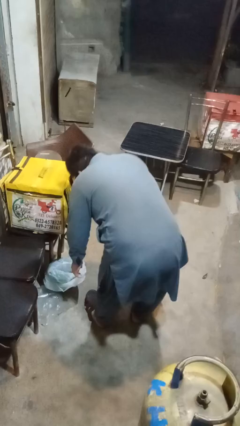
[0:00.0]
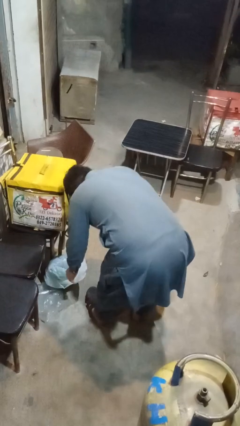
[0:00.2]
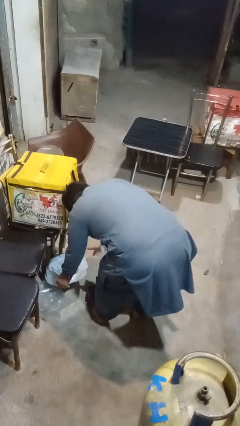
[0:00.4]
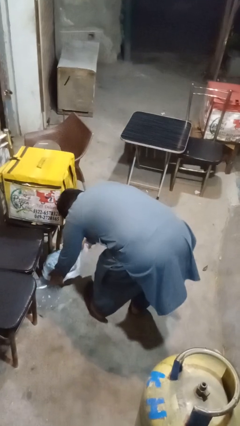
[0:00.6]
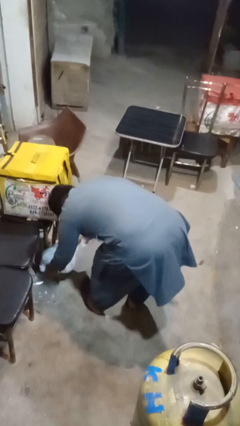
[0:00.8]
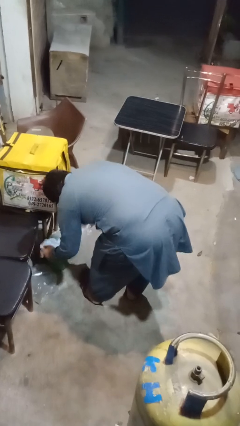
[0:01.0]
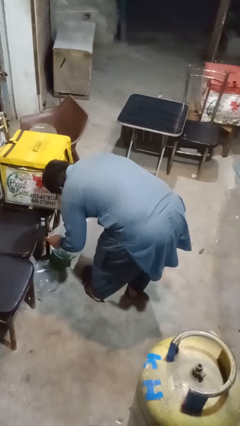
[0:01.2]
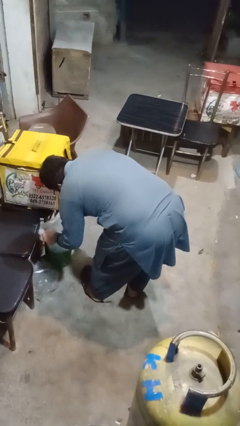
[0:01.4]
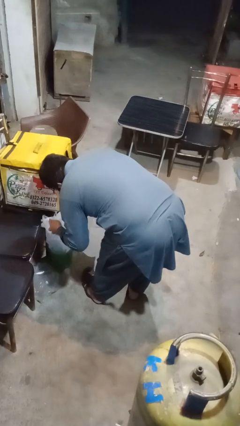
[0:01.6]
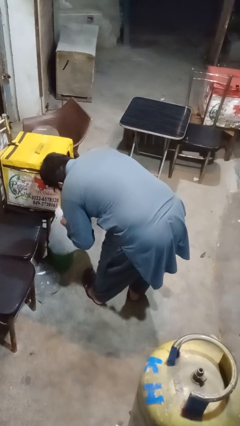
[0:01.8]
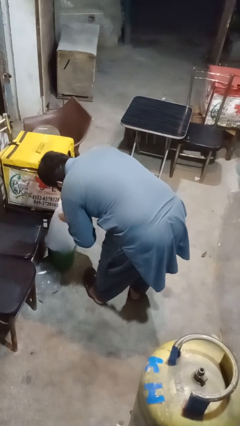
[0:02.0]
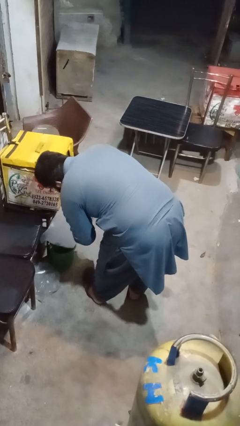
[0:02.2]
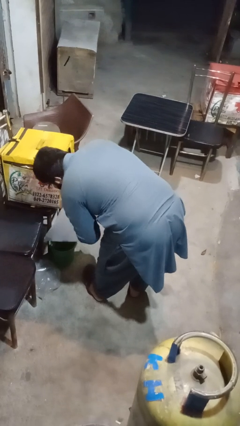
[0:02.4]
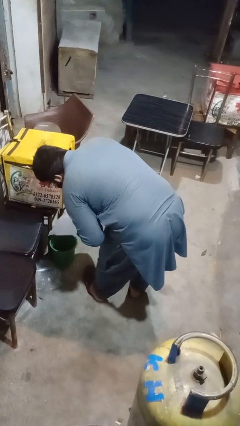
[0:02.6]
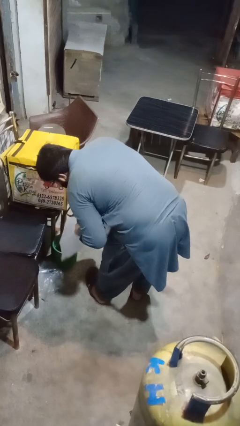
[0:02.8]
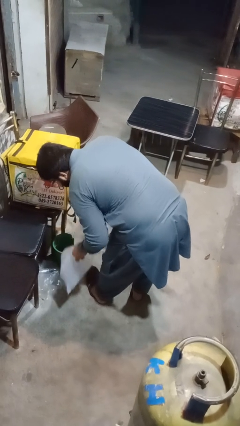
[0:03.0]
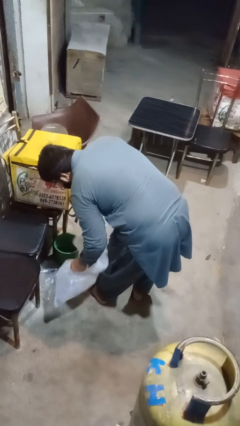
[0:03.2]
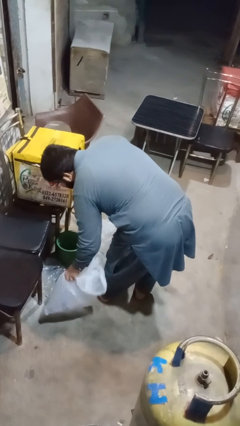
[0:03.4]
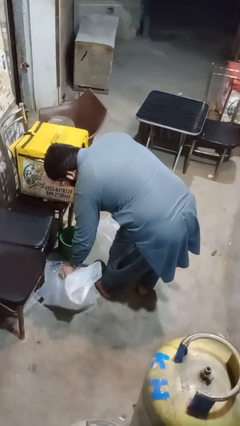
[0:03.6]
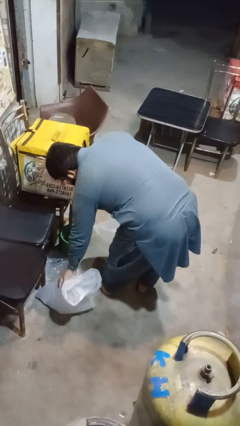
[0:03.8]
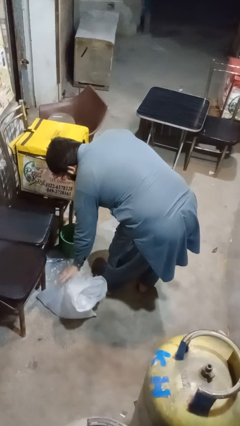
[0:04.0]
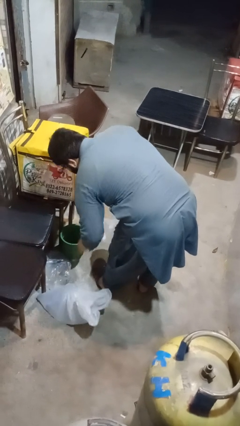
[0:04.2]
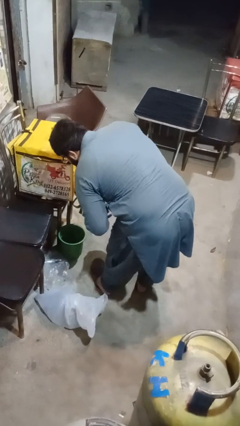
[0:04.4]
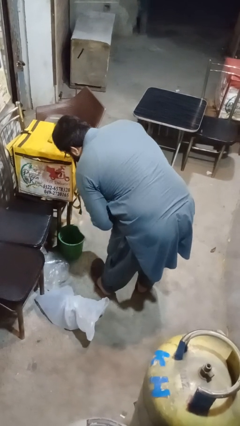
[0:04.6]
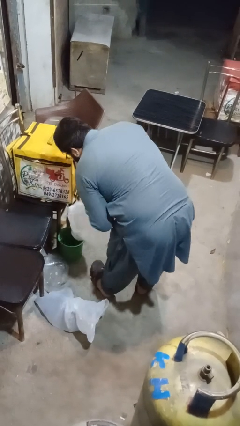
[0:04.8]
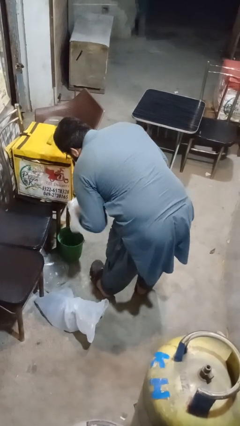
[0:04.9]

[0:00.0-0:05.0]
person removes trashbag from trashcan

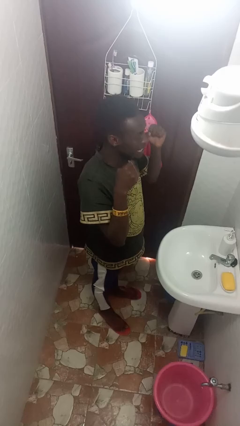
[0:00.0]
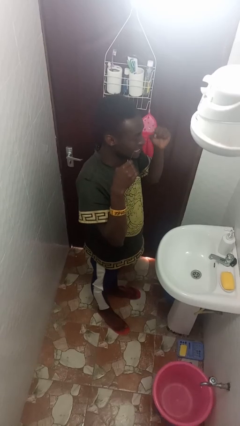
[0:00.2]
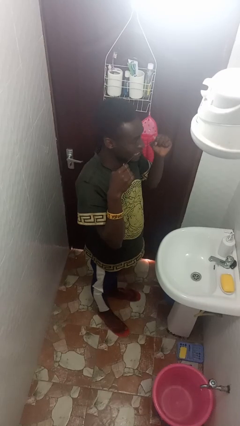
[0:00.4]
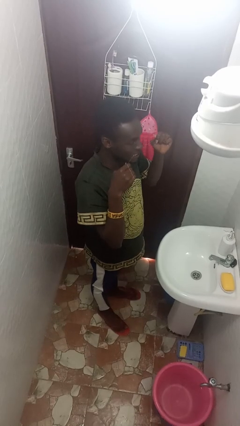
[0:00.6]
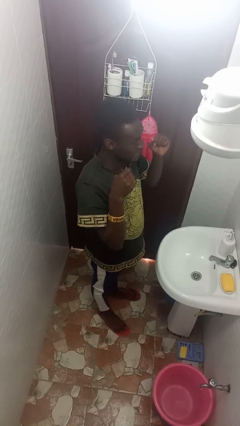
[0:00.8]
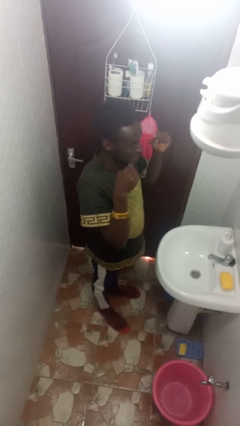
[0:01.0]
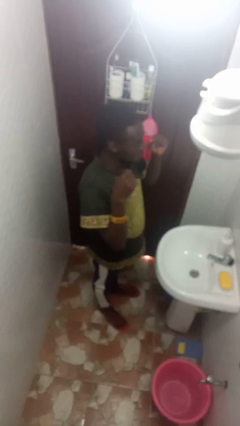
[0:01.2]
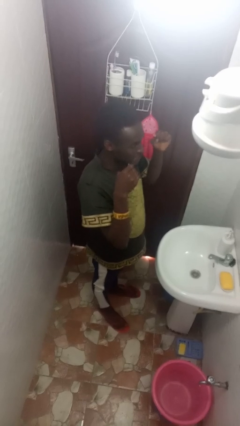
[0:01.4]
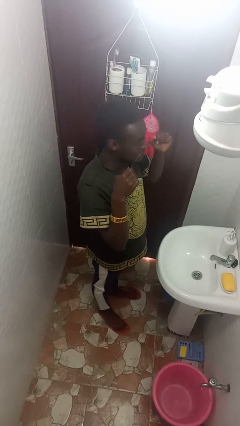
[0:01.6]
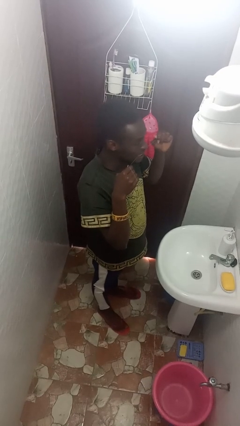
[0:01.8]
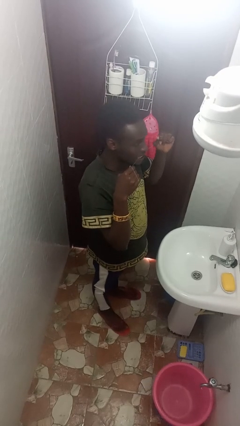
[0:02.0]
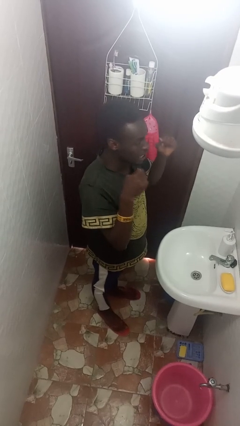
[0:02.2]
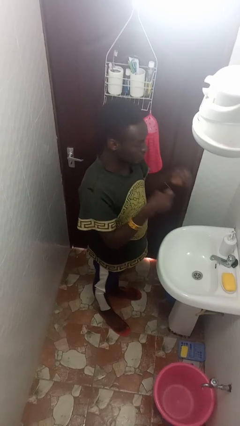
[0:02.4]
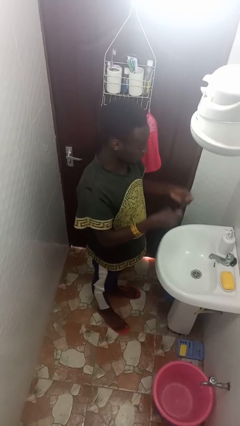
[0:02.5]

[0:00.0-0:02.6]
person flosses

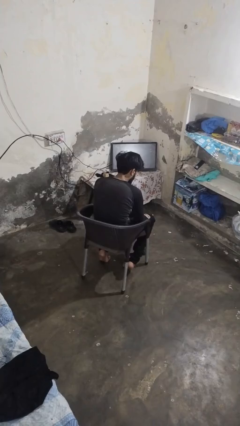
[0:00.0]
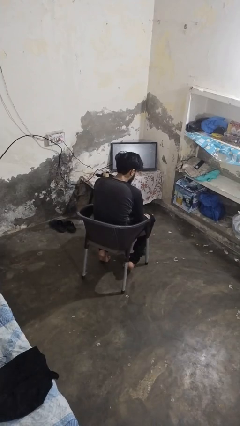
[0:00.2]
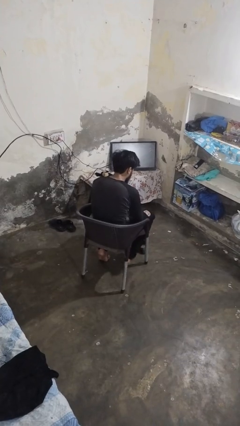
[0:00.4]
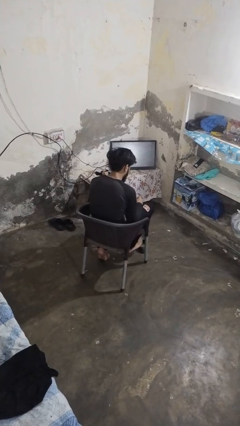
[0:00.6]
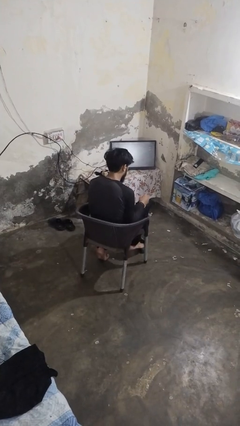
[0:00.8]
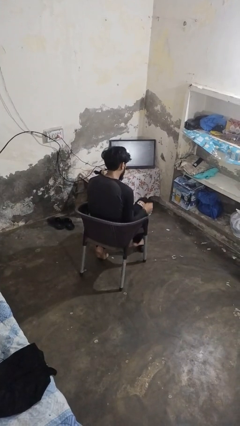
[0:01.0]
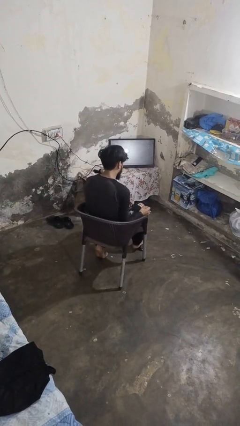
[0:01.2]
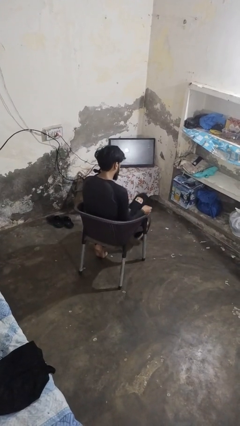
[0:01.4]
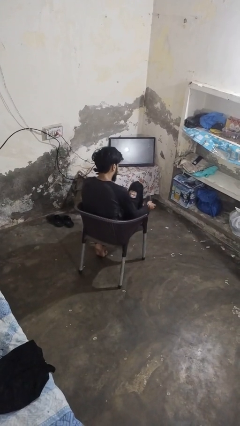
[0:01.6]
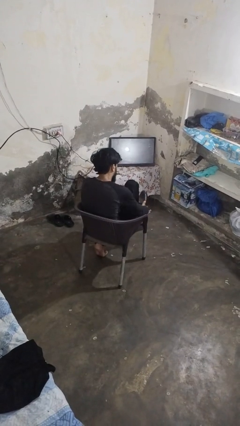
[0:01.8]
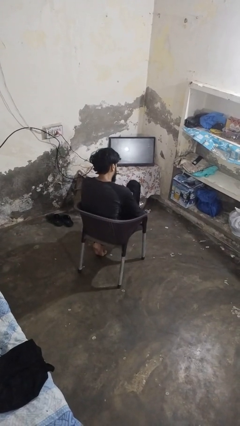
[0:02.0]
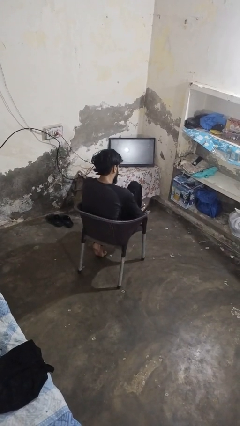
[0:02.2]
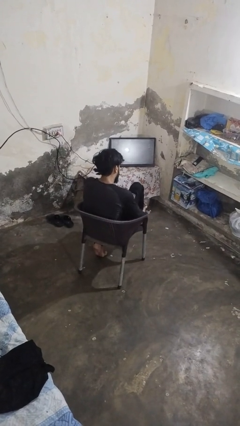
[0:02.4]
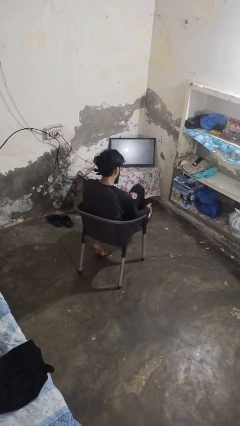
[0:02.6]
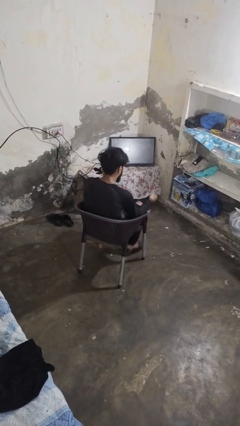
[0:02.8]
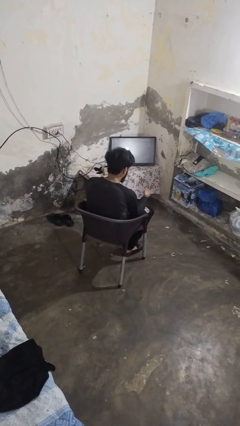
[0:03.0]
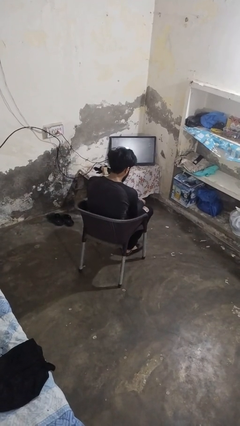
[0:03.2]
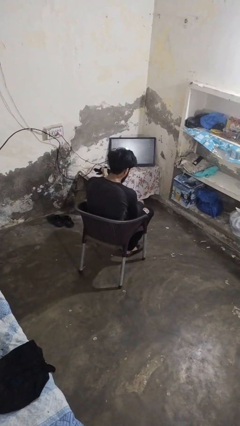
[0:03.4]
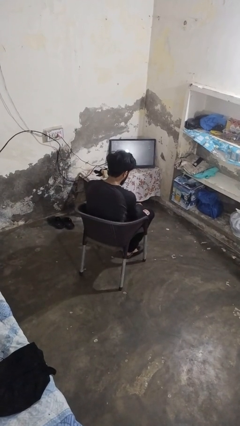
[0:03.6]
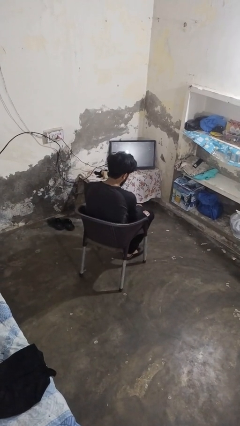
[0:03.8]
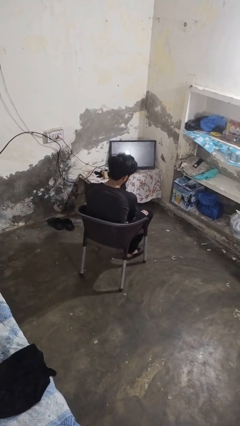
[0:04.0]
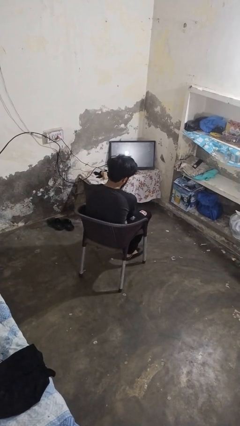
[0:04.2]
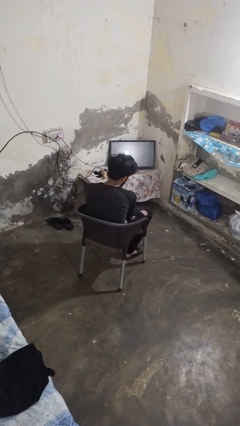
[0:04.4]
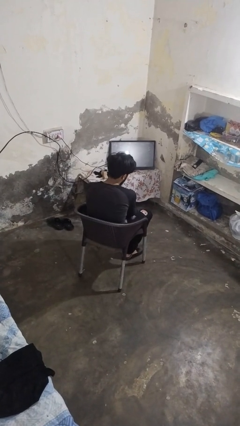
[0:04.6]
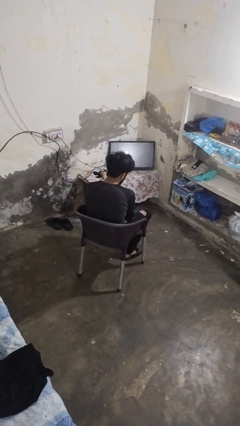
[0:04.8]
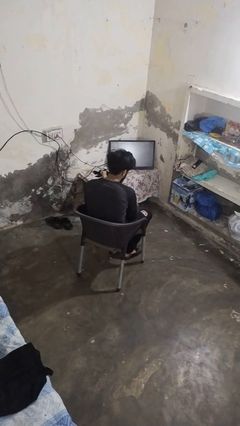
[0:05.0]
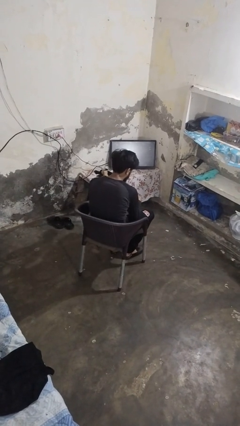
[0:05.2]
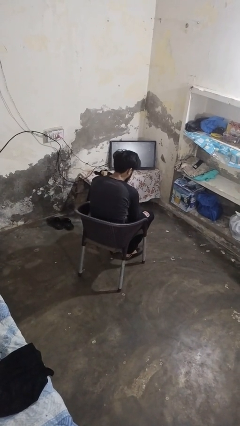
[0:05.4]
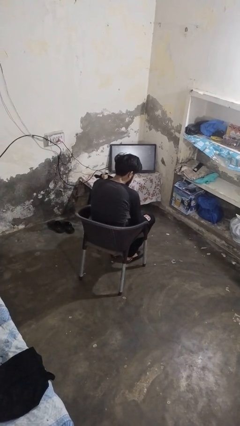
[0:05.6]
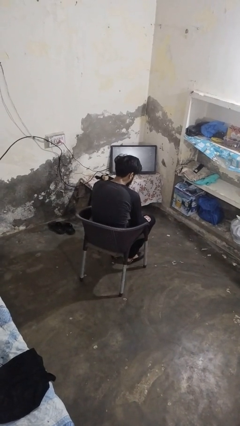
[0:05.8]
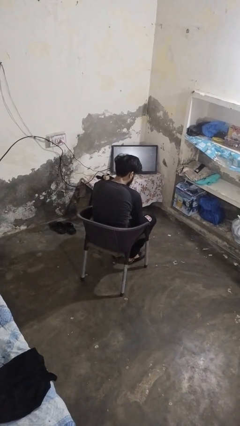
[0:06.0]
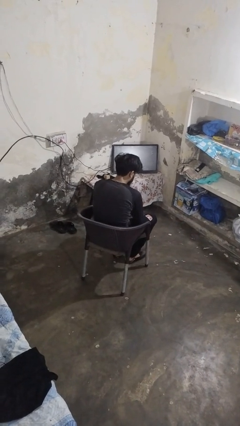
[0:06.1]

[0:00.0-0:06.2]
person puts on shoes

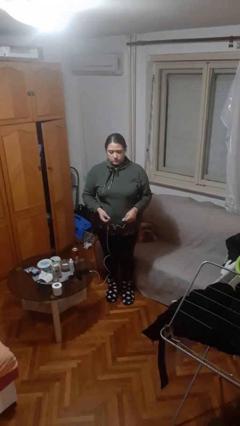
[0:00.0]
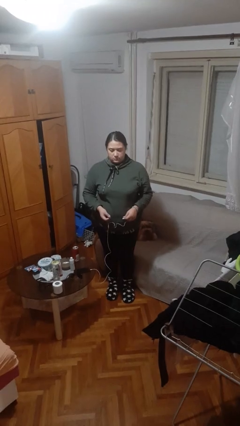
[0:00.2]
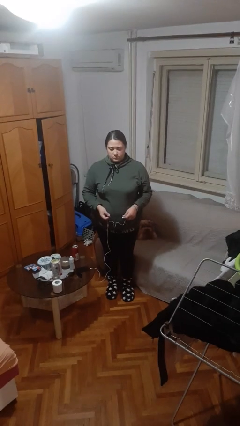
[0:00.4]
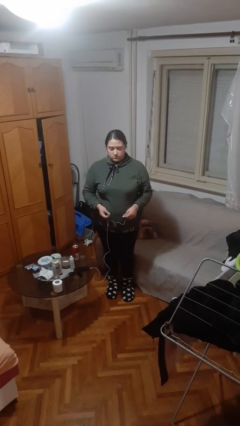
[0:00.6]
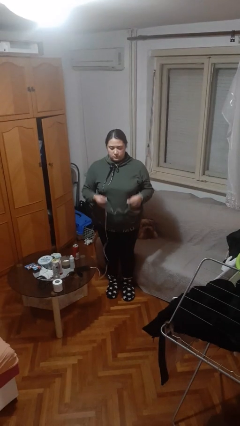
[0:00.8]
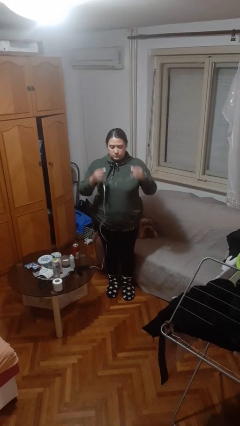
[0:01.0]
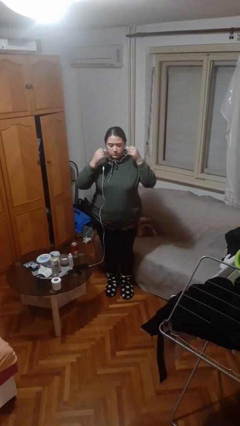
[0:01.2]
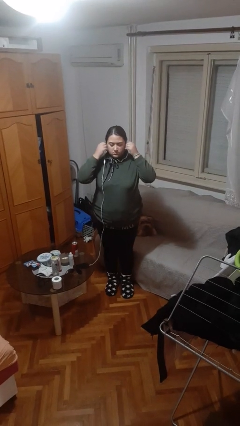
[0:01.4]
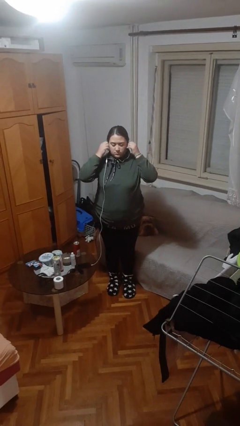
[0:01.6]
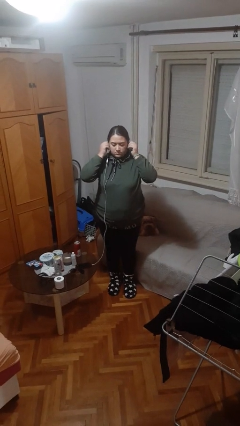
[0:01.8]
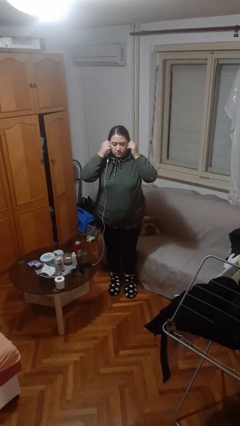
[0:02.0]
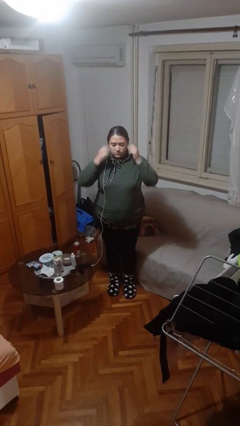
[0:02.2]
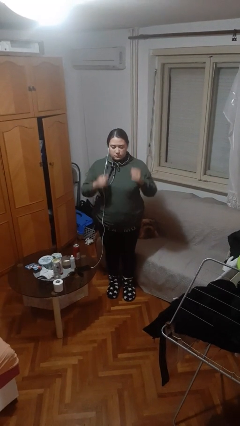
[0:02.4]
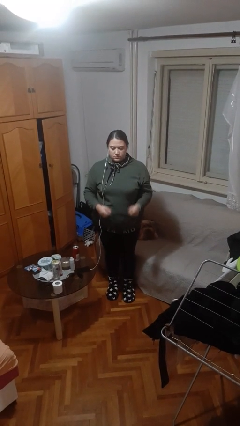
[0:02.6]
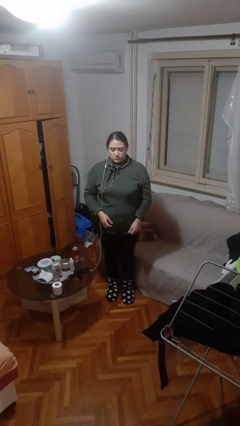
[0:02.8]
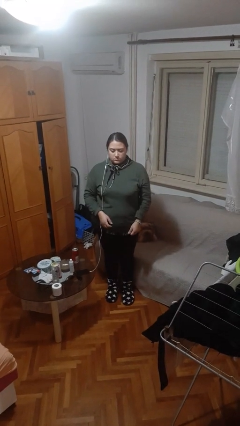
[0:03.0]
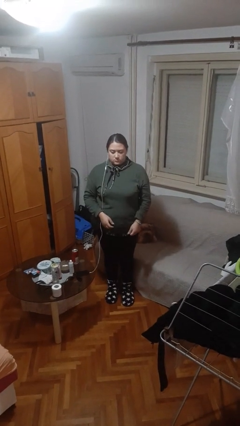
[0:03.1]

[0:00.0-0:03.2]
person puts on headphones

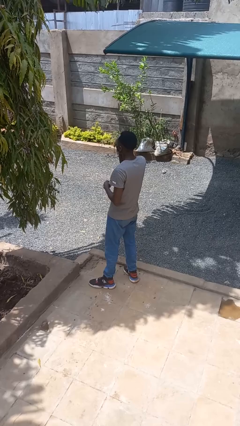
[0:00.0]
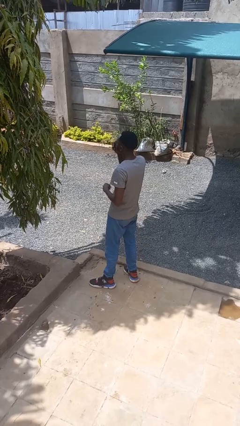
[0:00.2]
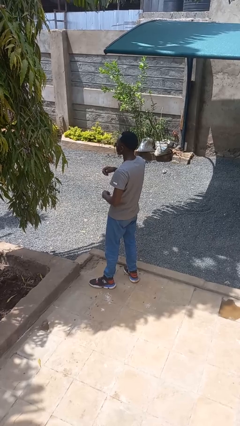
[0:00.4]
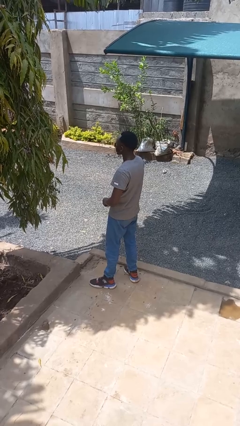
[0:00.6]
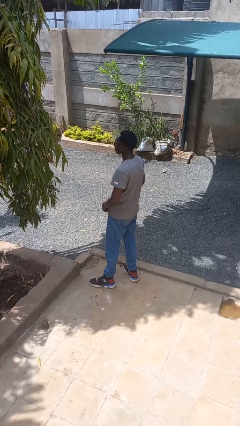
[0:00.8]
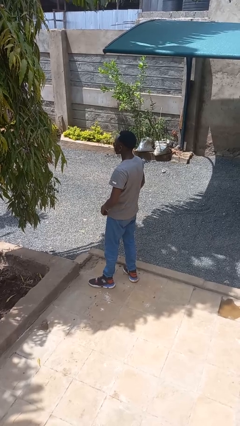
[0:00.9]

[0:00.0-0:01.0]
person puts on facemask
